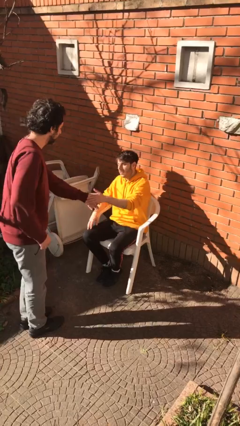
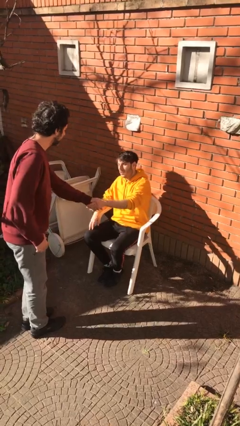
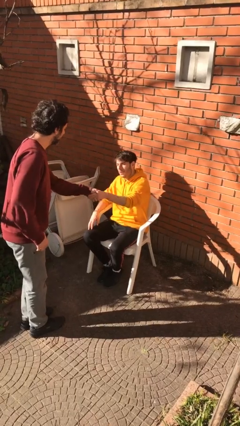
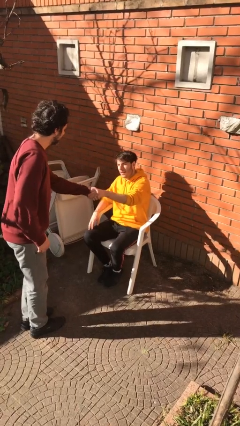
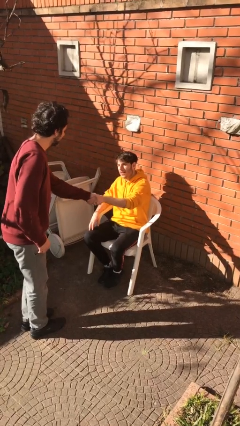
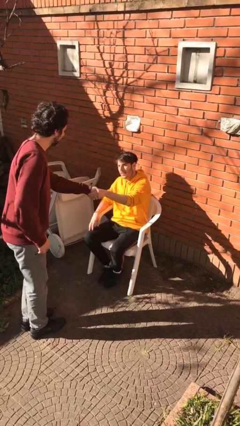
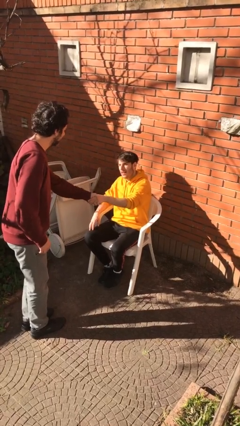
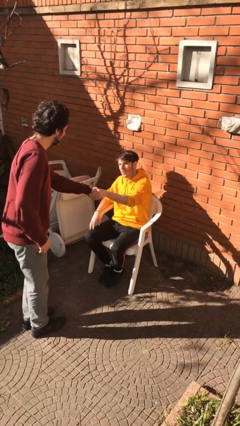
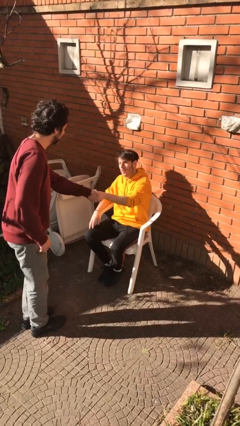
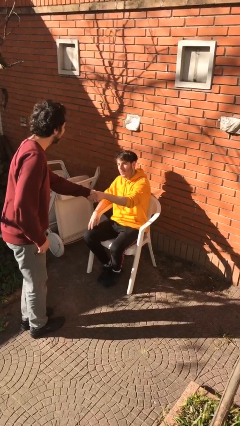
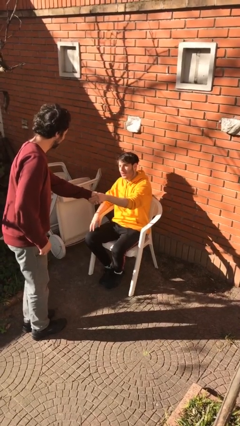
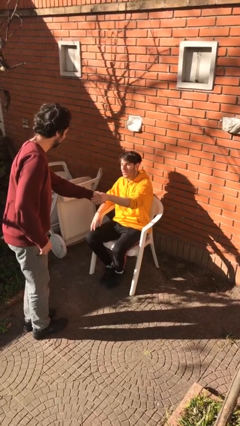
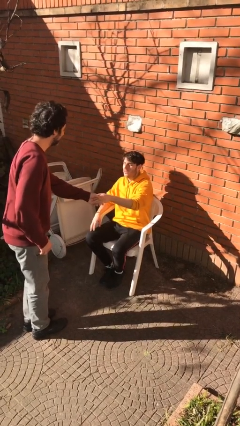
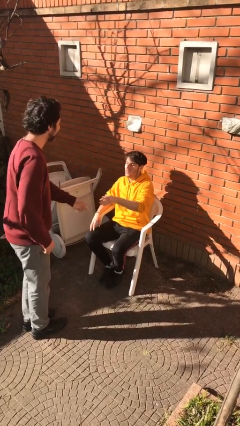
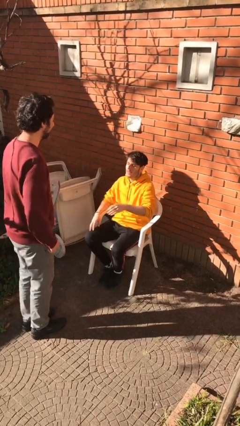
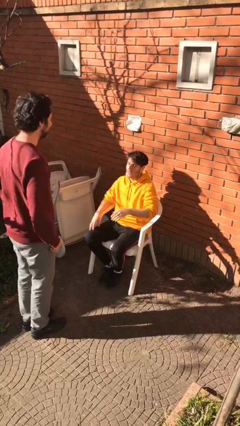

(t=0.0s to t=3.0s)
person shakes hand

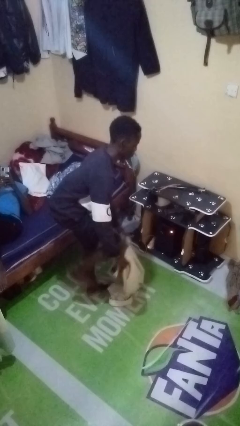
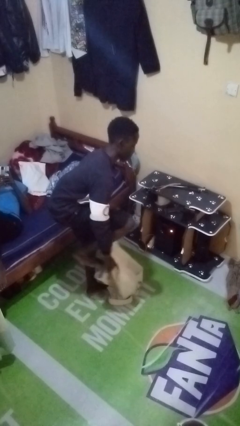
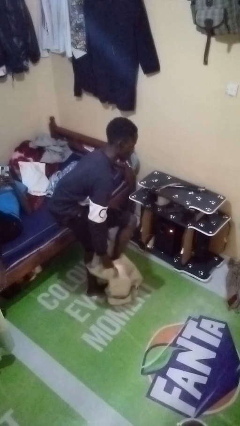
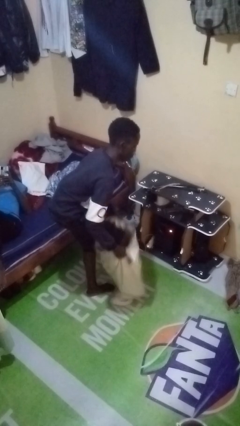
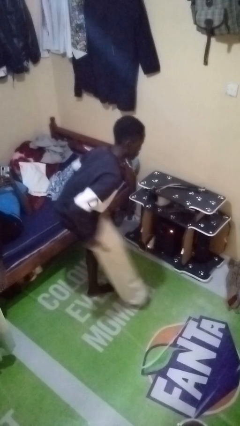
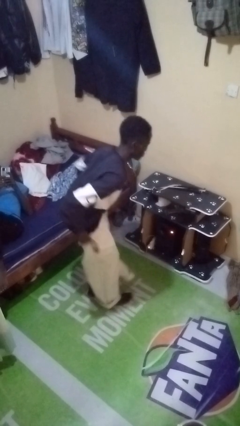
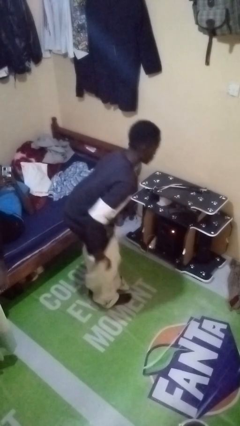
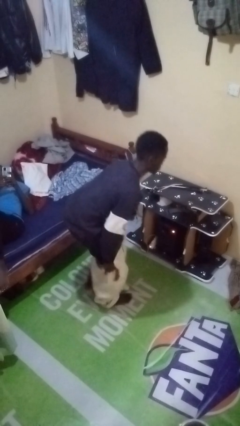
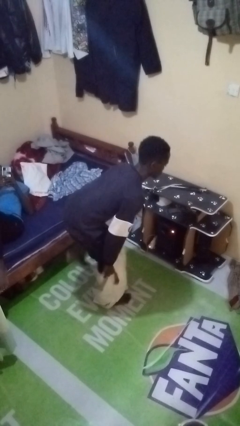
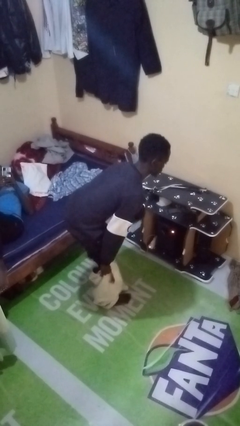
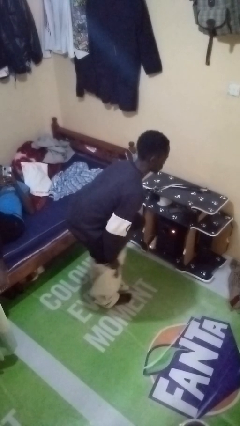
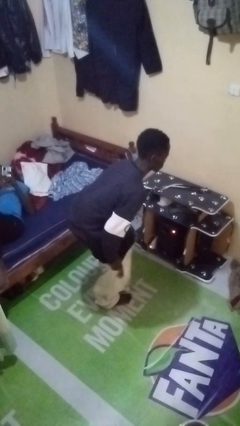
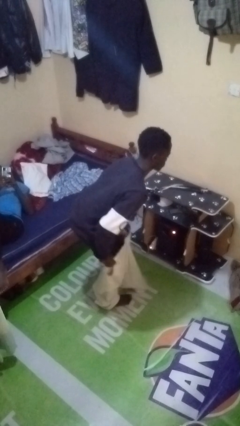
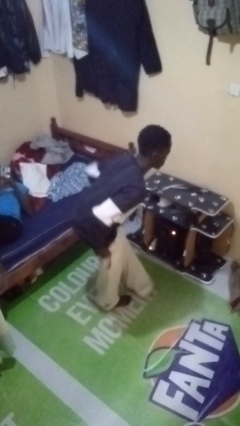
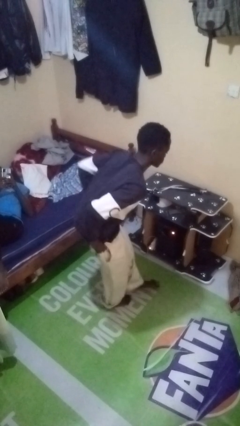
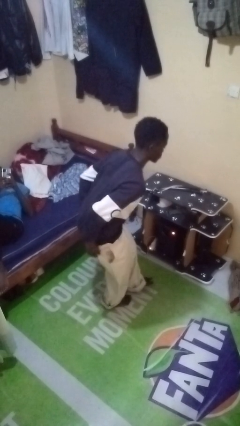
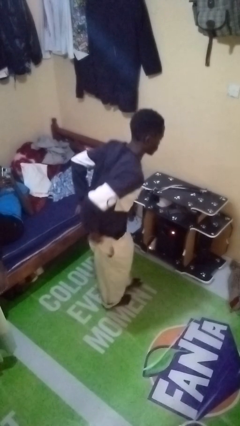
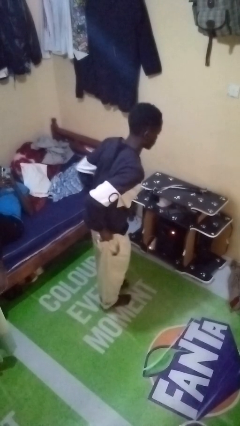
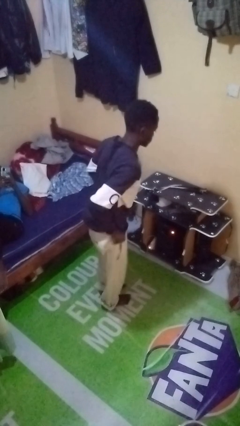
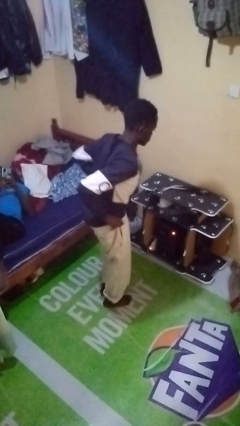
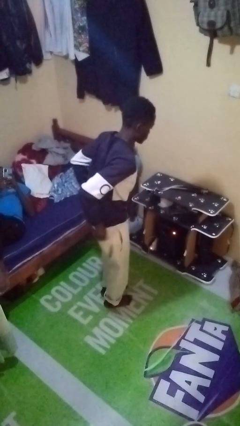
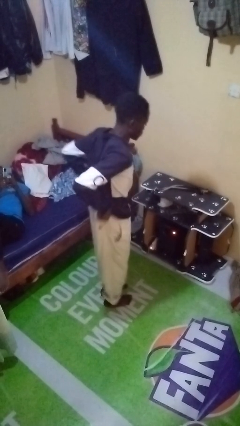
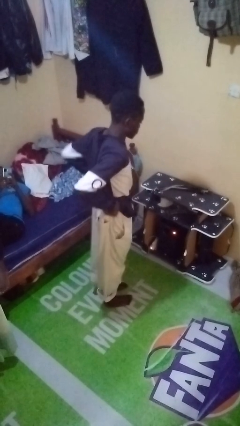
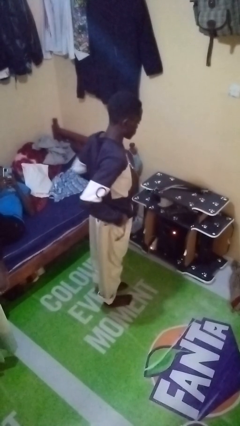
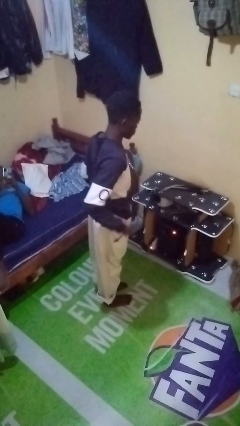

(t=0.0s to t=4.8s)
person puts on pants

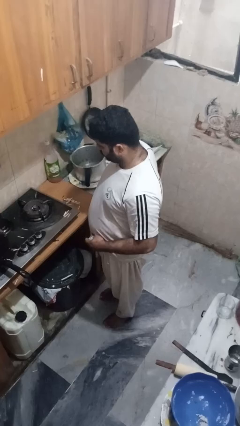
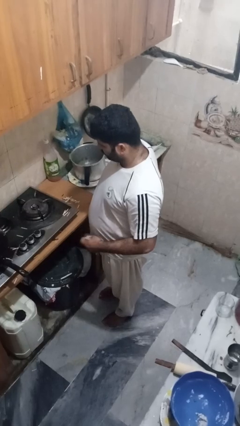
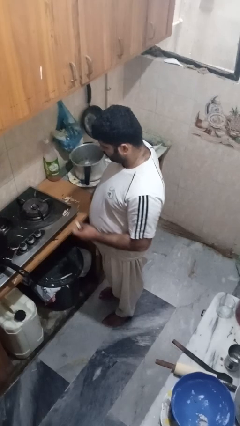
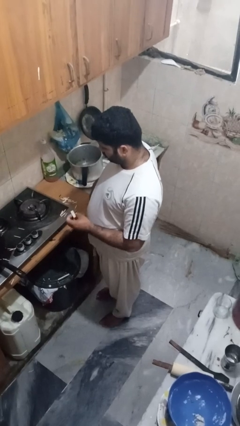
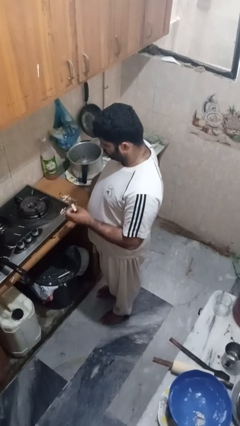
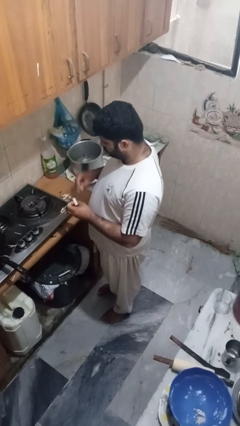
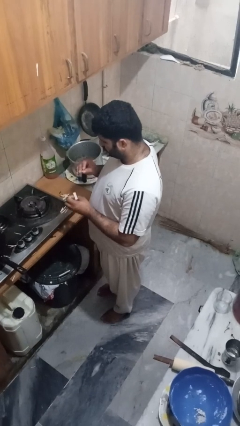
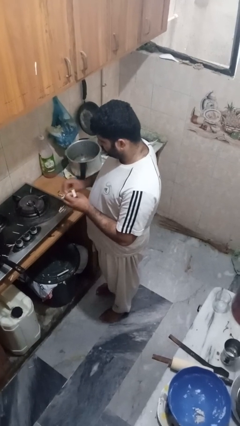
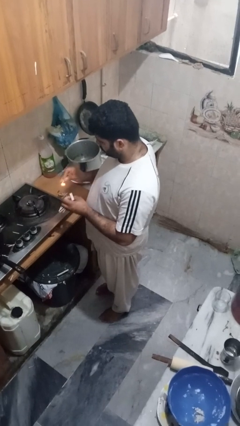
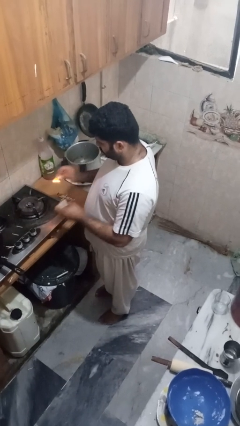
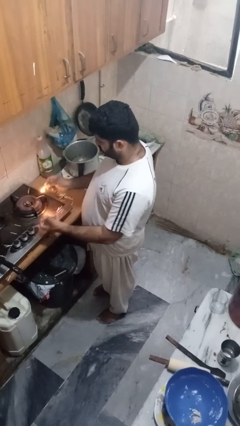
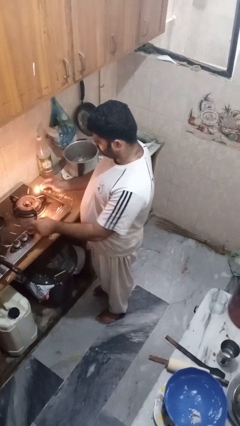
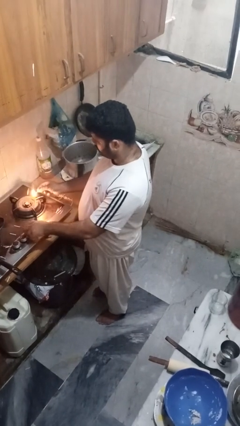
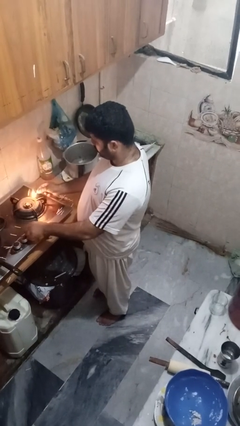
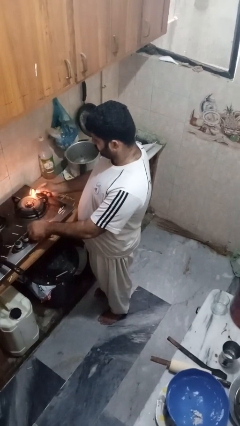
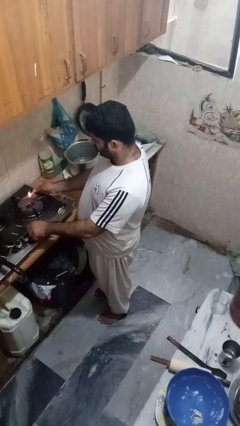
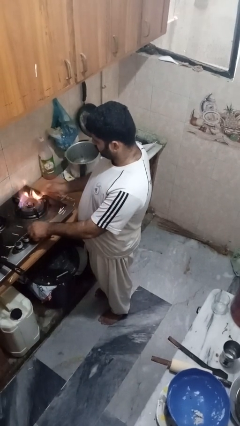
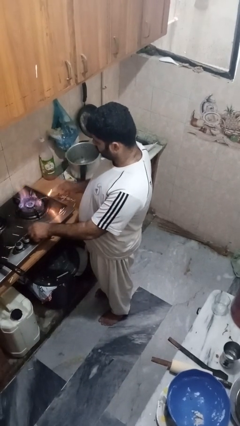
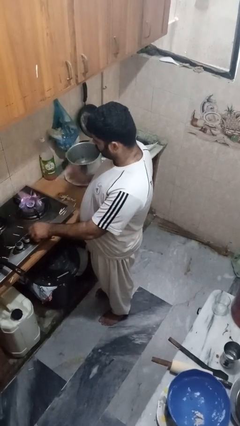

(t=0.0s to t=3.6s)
person turns on stovetop

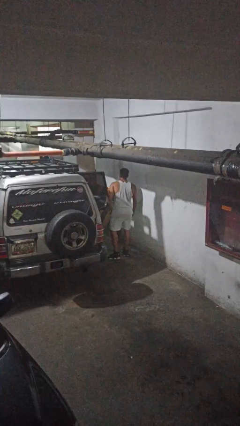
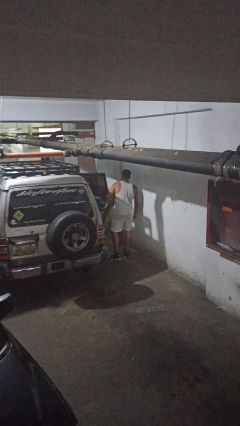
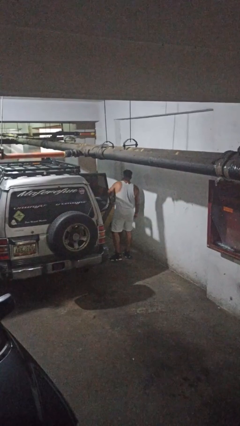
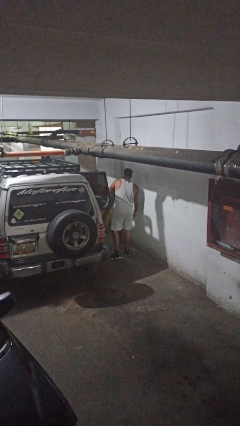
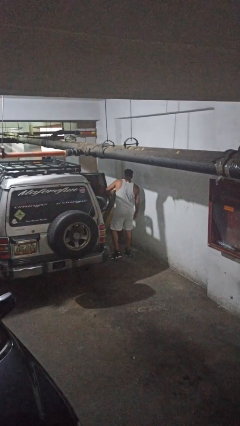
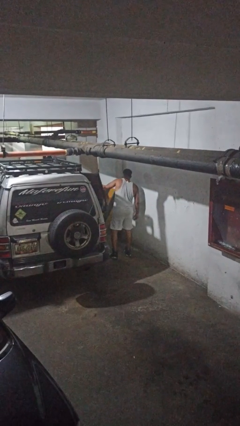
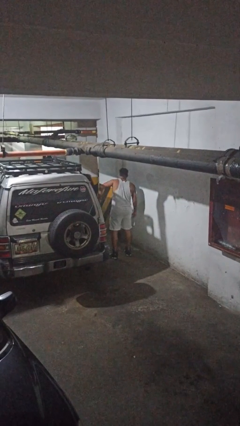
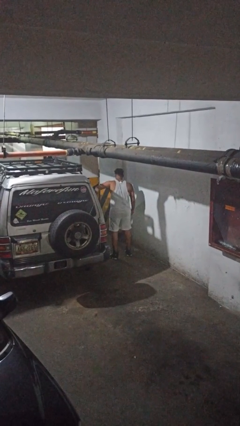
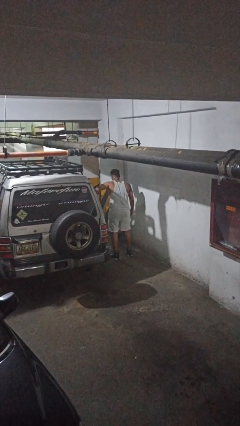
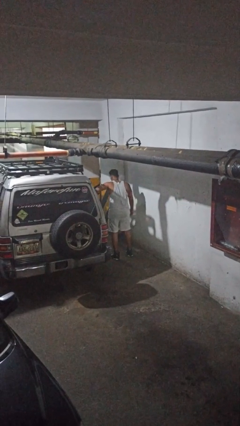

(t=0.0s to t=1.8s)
person closes car door

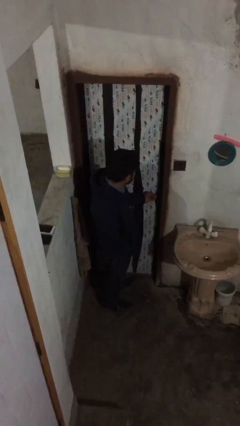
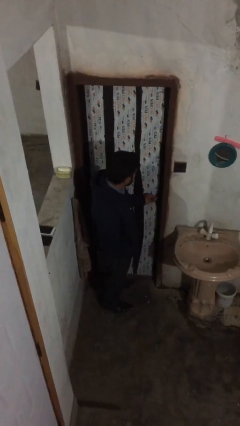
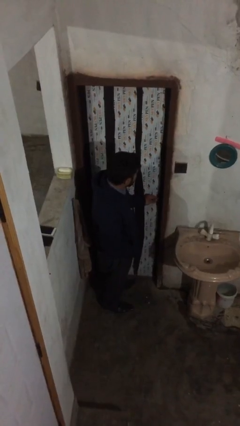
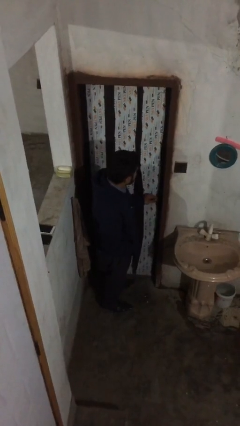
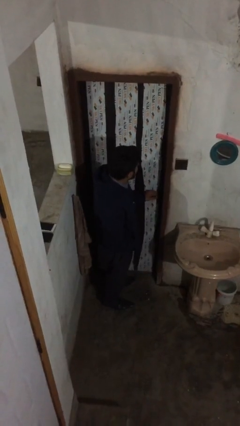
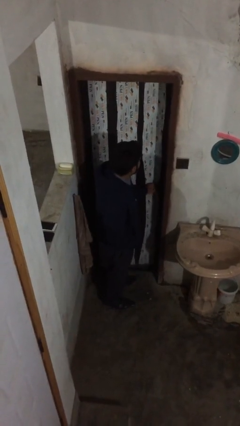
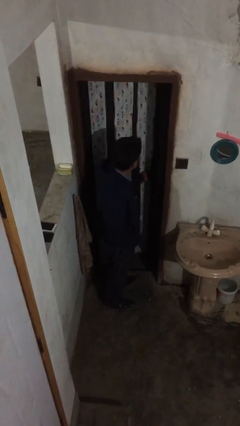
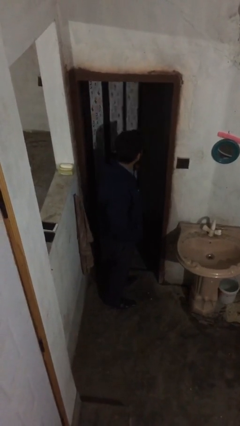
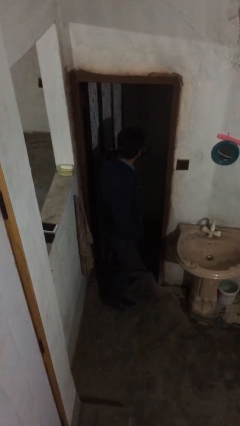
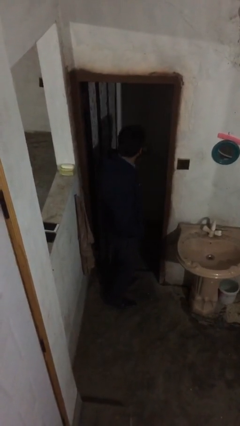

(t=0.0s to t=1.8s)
person opens facility door

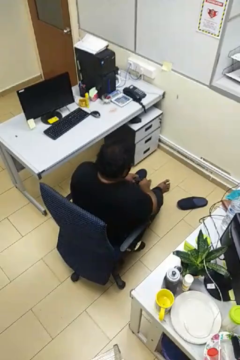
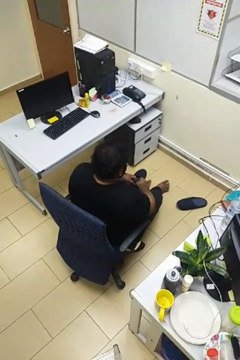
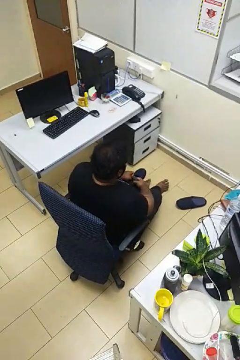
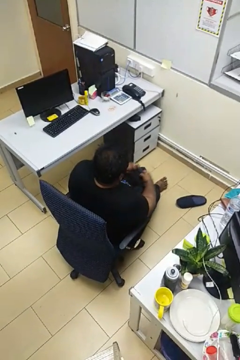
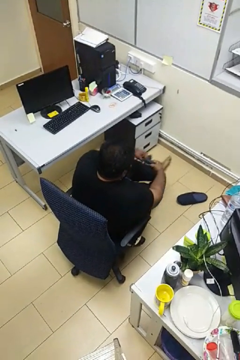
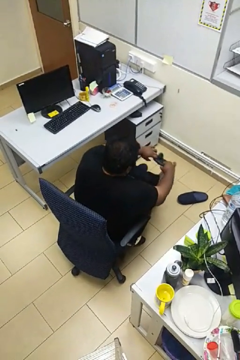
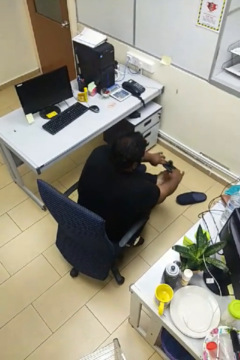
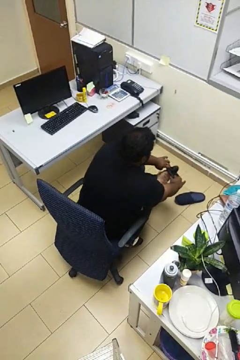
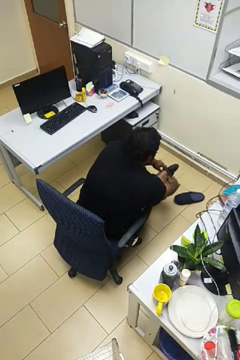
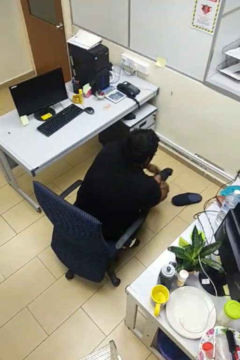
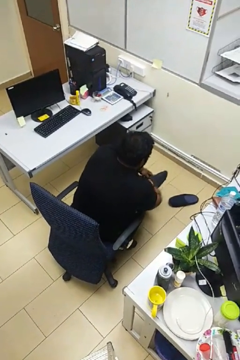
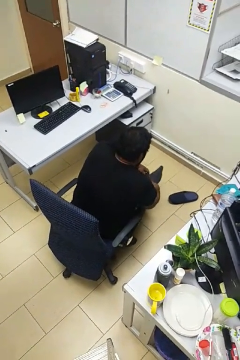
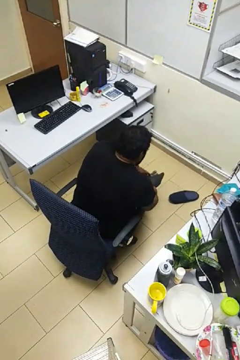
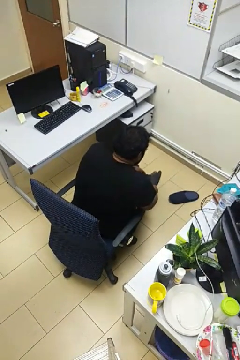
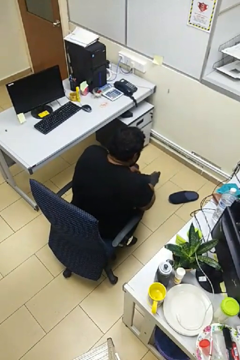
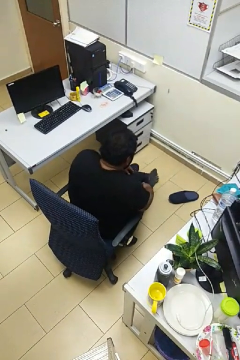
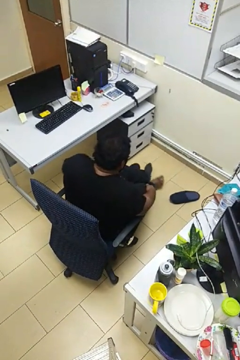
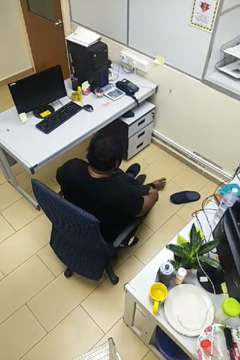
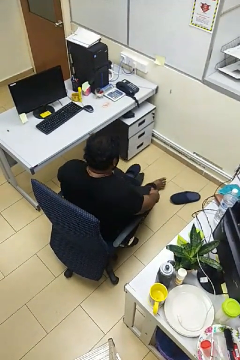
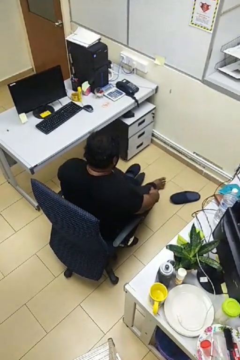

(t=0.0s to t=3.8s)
person puts on socks
